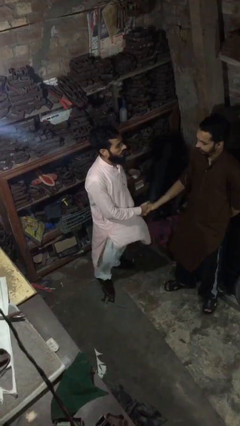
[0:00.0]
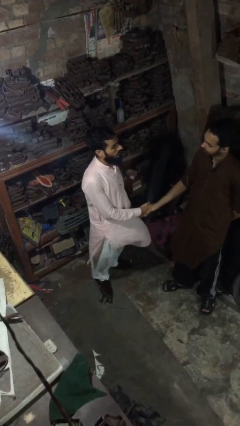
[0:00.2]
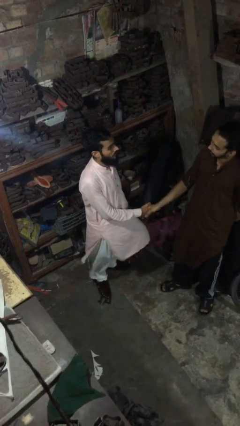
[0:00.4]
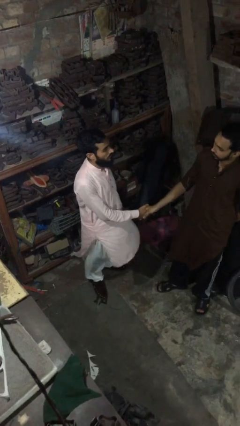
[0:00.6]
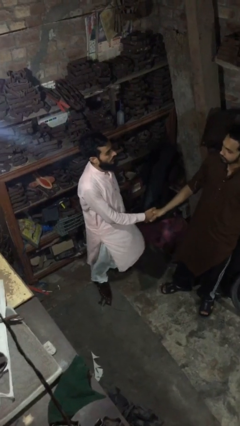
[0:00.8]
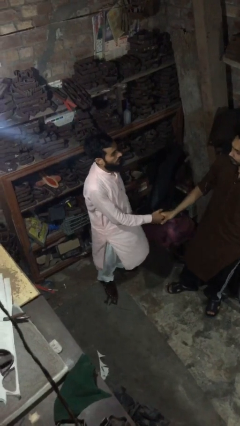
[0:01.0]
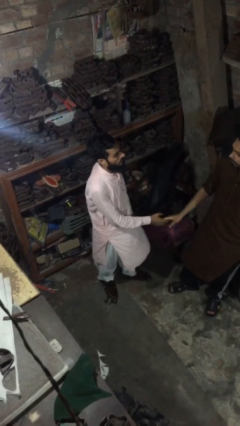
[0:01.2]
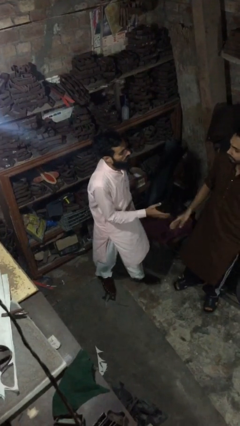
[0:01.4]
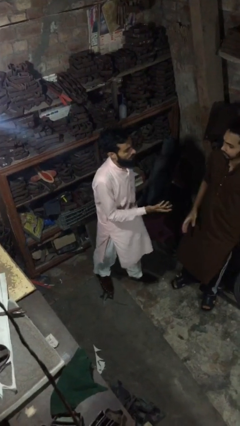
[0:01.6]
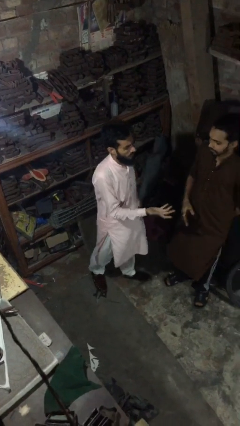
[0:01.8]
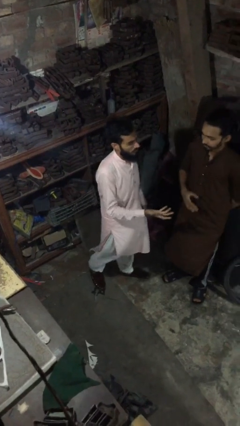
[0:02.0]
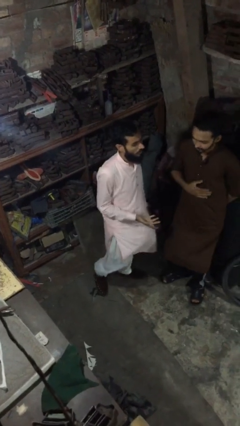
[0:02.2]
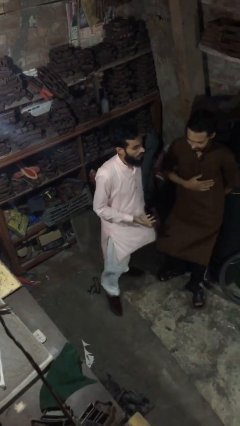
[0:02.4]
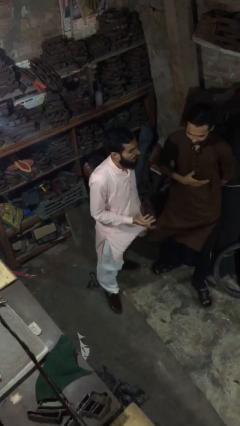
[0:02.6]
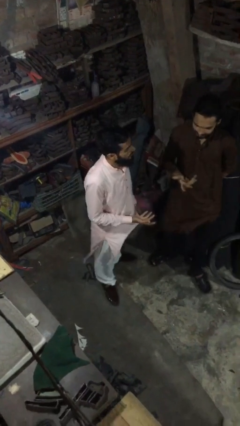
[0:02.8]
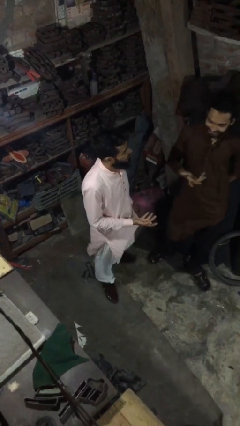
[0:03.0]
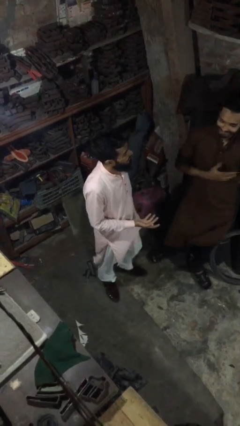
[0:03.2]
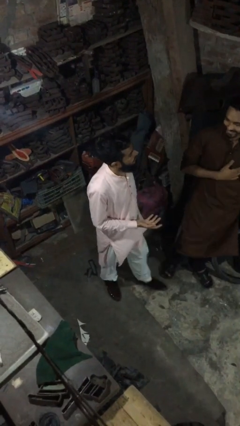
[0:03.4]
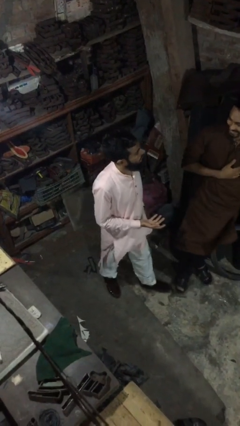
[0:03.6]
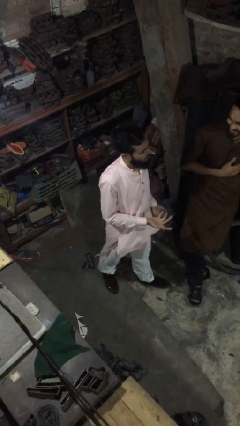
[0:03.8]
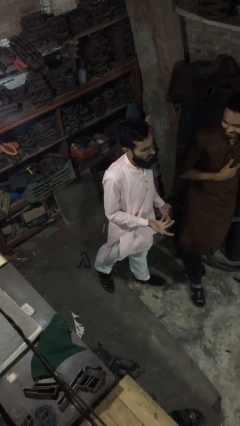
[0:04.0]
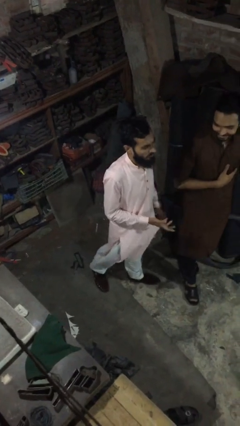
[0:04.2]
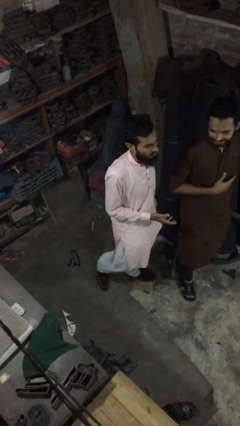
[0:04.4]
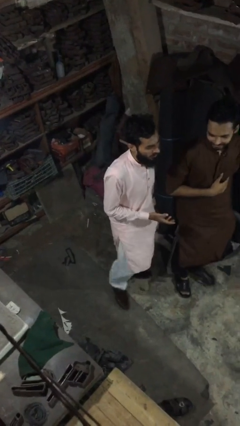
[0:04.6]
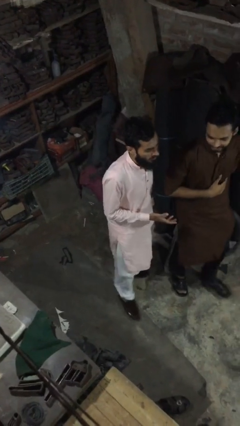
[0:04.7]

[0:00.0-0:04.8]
person talks to person

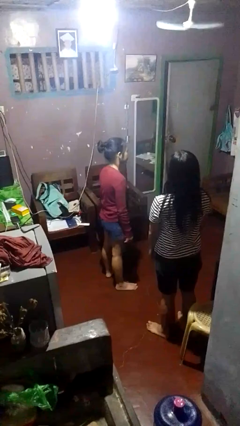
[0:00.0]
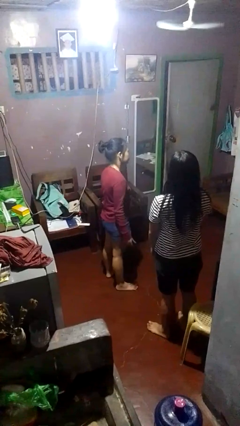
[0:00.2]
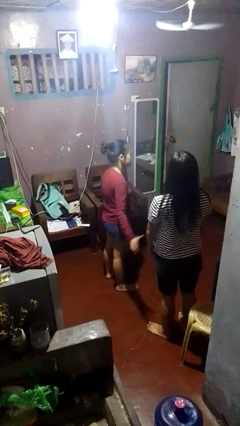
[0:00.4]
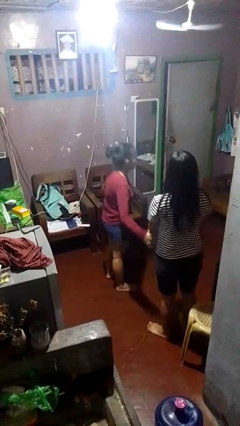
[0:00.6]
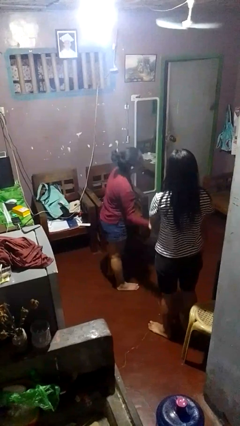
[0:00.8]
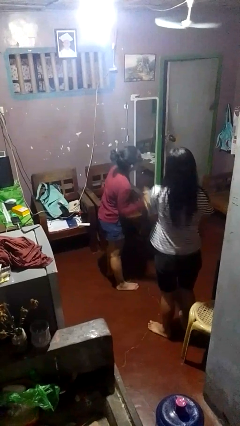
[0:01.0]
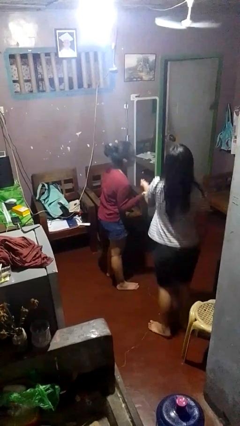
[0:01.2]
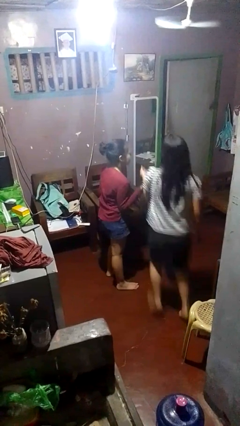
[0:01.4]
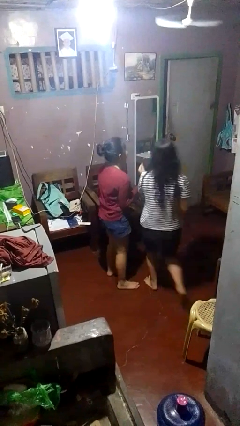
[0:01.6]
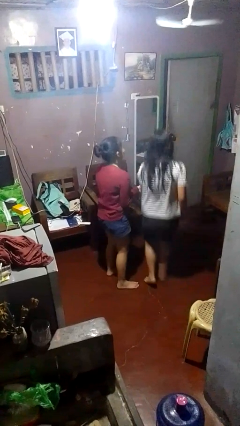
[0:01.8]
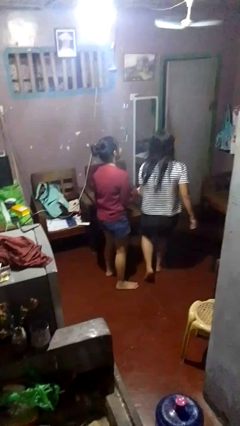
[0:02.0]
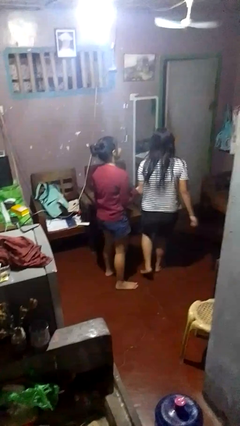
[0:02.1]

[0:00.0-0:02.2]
person grabs person by forearm

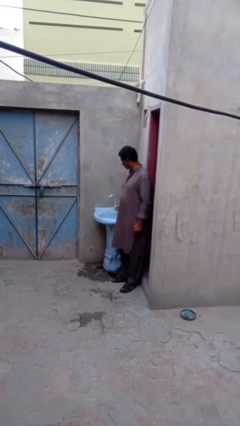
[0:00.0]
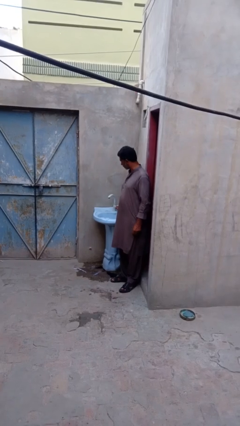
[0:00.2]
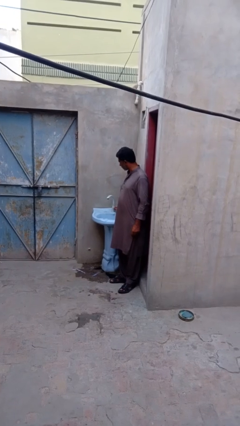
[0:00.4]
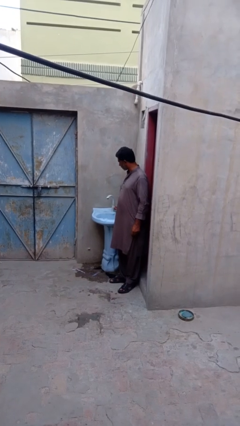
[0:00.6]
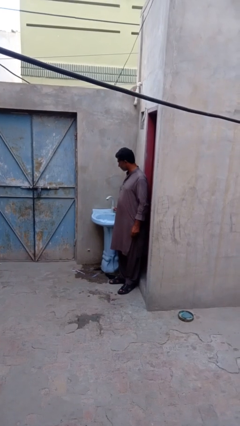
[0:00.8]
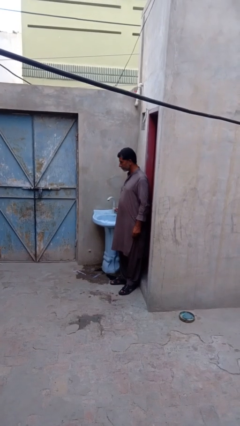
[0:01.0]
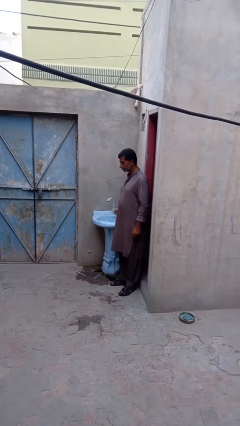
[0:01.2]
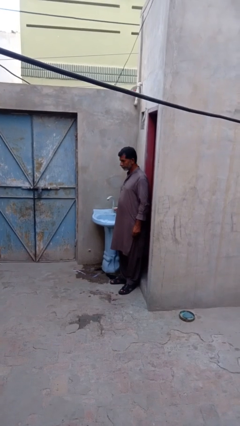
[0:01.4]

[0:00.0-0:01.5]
person turns off faucet

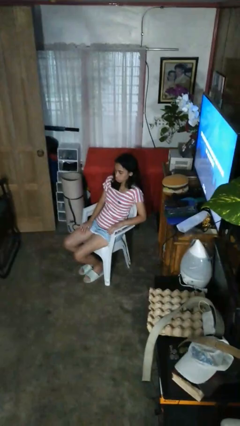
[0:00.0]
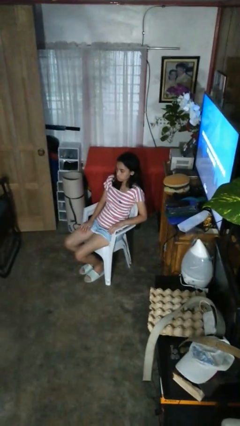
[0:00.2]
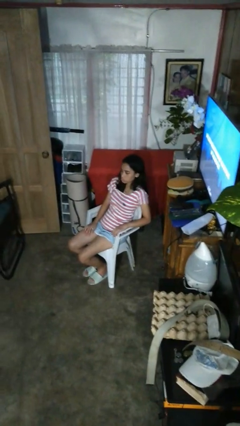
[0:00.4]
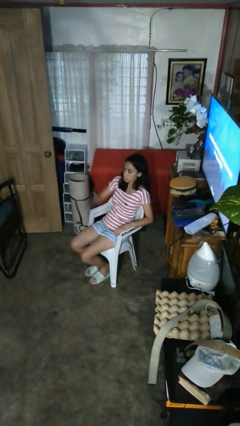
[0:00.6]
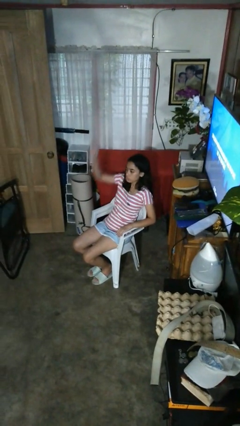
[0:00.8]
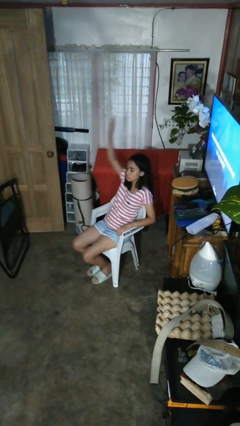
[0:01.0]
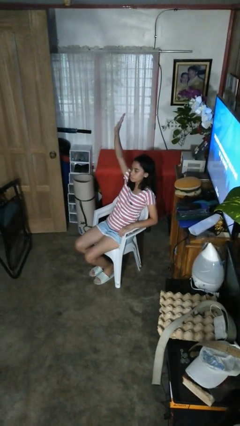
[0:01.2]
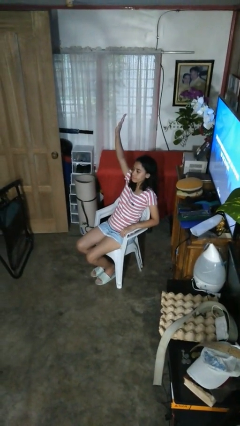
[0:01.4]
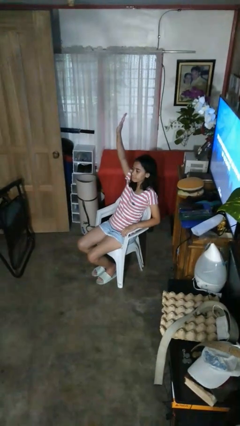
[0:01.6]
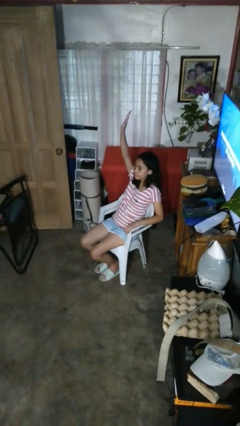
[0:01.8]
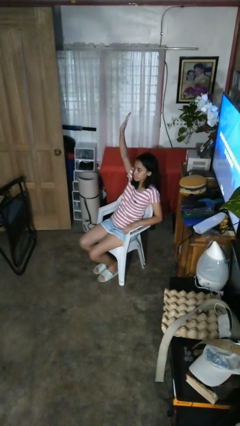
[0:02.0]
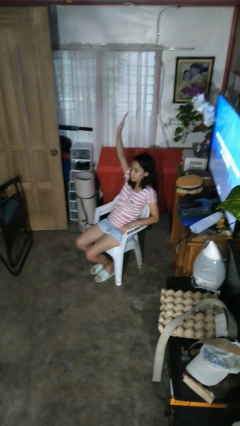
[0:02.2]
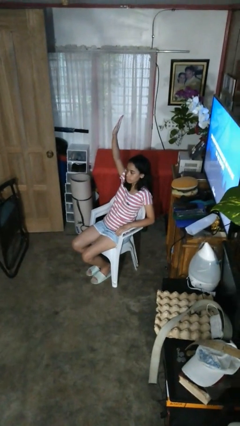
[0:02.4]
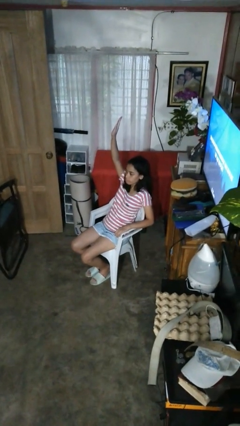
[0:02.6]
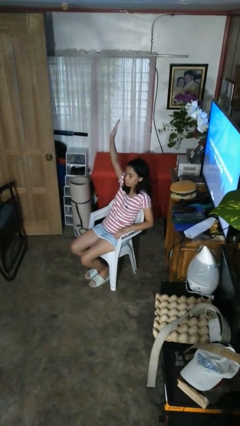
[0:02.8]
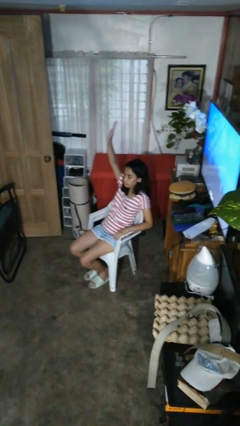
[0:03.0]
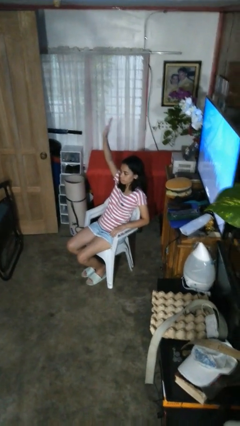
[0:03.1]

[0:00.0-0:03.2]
person gestures raise hand

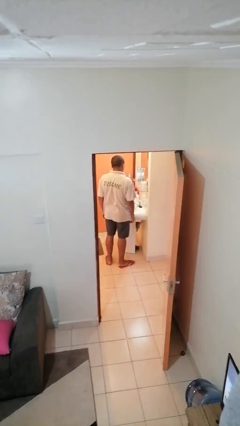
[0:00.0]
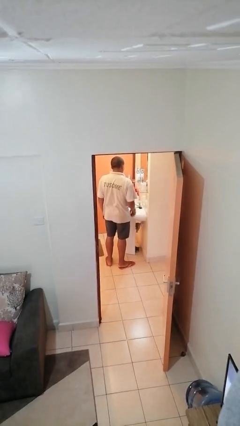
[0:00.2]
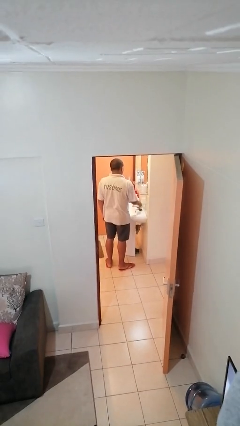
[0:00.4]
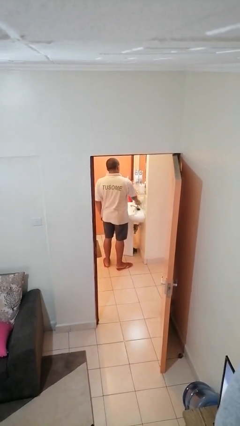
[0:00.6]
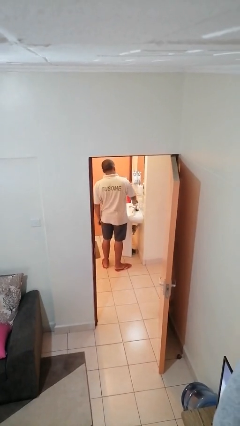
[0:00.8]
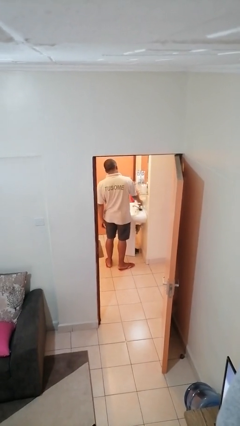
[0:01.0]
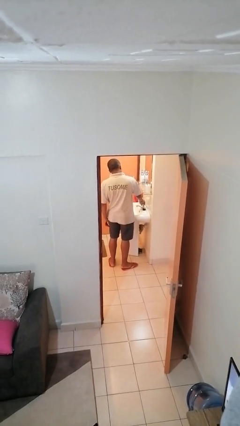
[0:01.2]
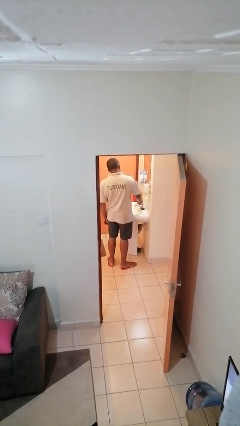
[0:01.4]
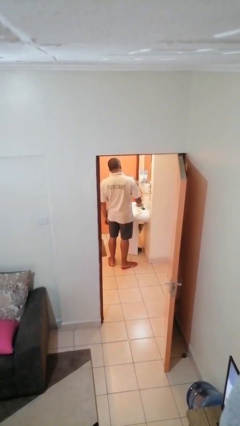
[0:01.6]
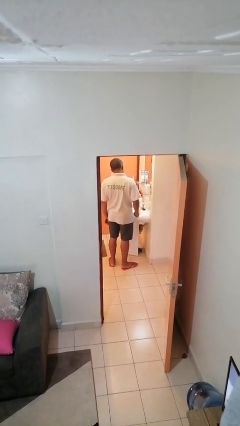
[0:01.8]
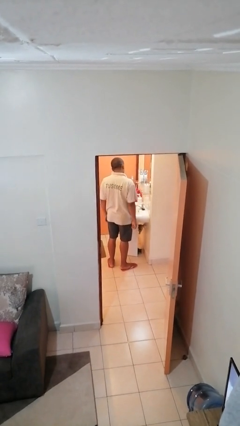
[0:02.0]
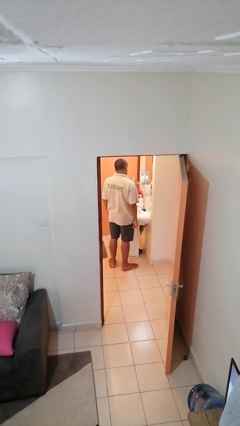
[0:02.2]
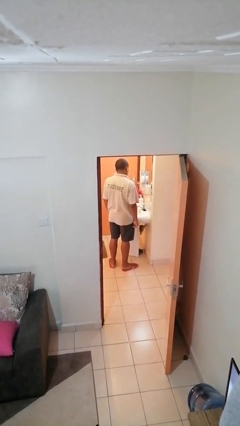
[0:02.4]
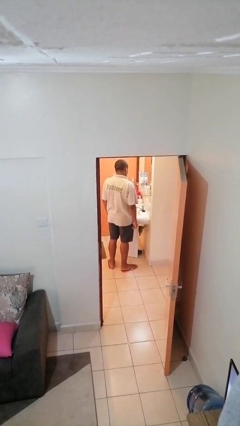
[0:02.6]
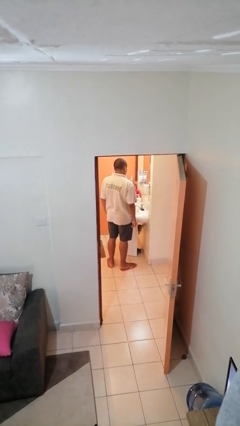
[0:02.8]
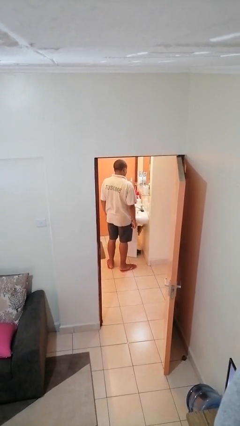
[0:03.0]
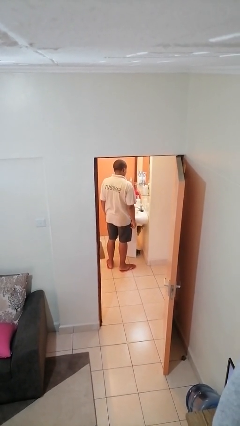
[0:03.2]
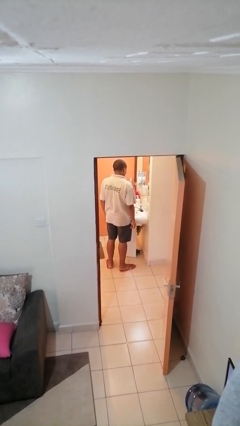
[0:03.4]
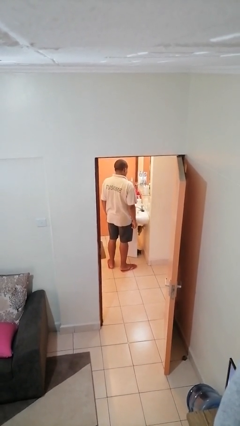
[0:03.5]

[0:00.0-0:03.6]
person turns on faucet

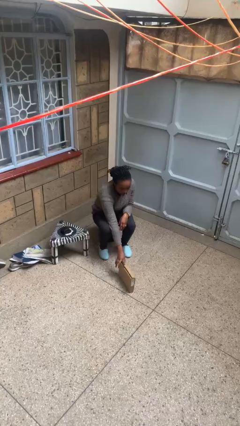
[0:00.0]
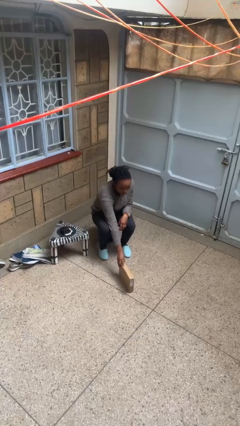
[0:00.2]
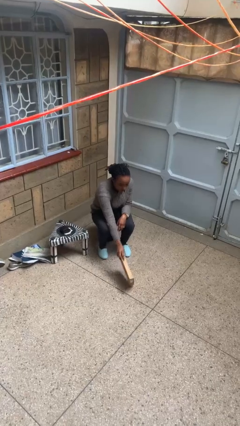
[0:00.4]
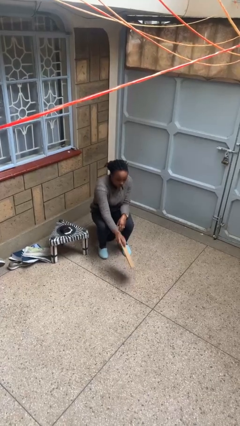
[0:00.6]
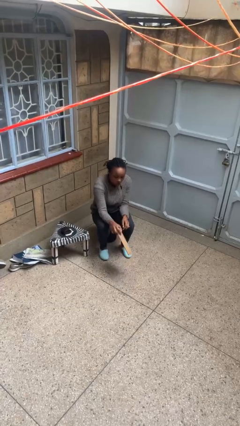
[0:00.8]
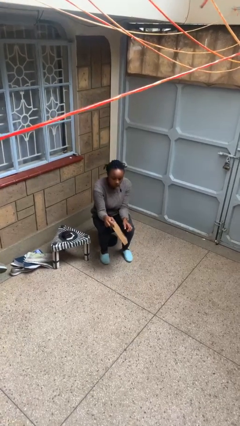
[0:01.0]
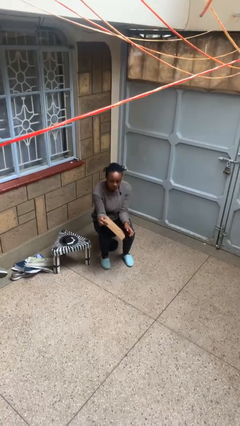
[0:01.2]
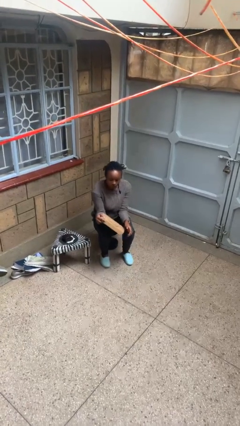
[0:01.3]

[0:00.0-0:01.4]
person picks up object from floor

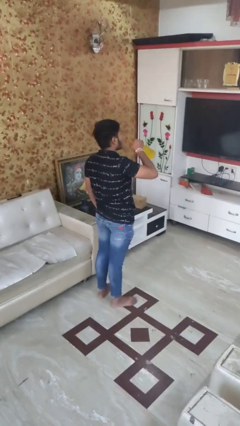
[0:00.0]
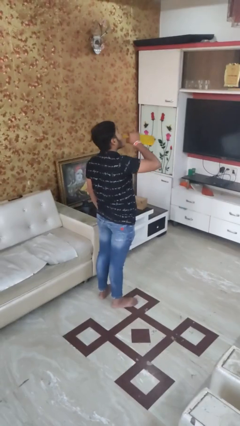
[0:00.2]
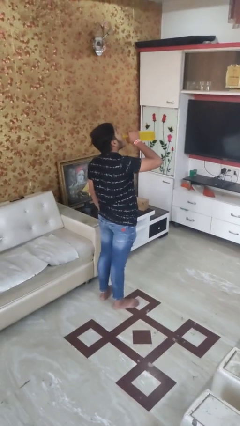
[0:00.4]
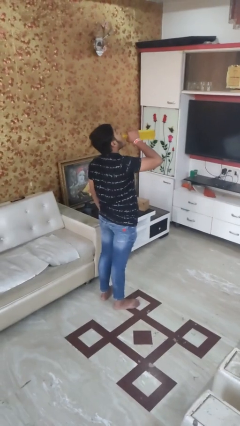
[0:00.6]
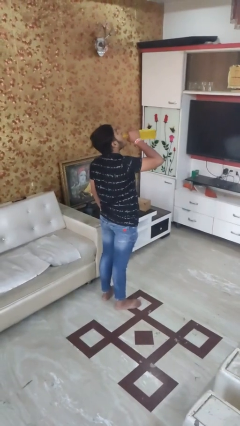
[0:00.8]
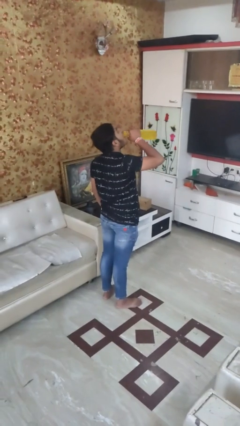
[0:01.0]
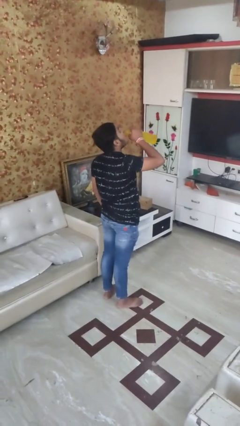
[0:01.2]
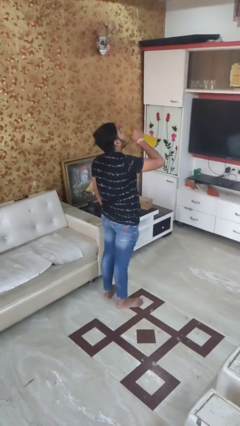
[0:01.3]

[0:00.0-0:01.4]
person drinks from bottle
